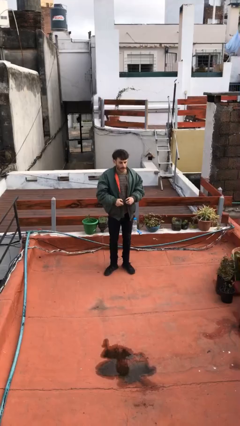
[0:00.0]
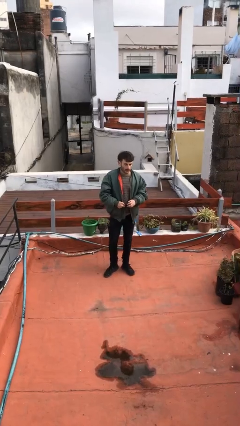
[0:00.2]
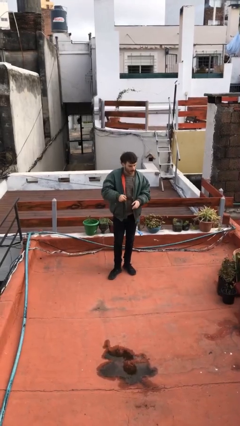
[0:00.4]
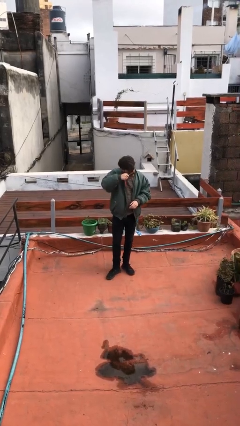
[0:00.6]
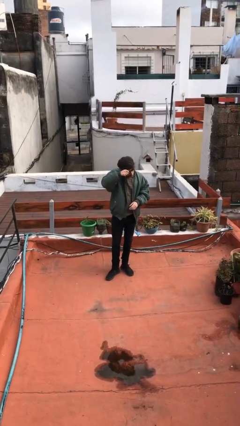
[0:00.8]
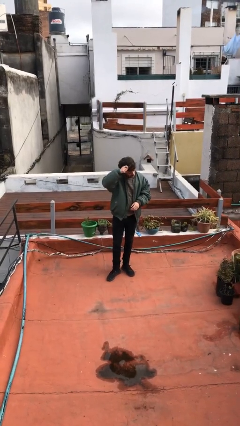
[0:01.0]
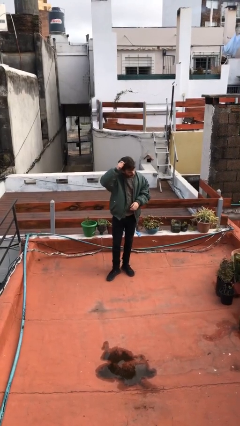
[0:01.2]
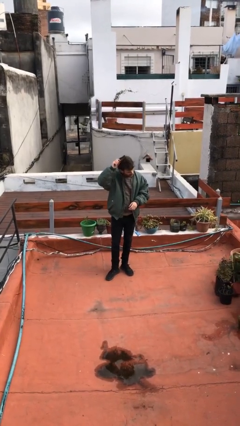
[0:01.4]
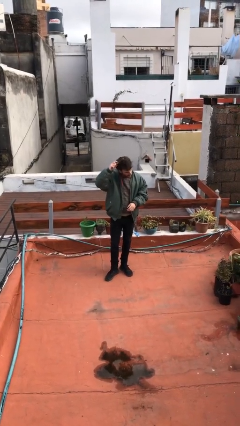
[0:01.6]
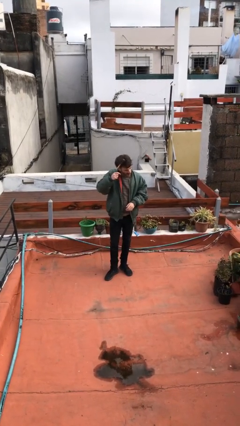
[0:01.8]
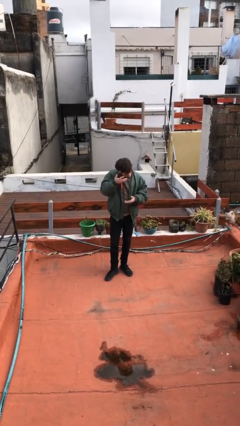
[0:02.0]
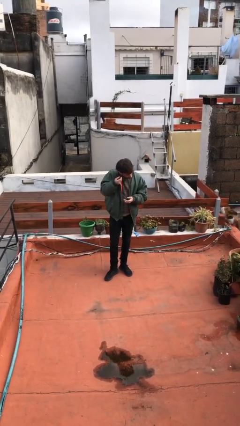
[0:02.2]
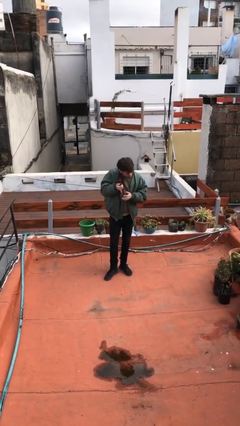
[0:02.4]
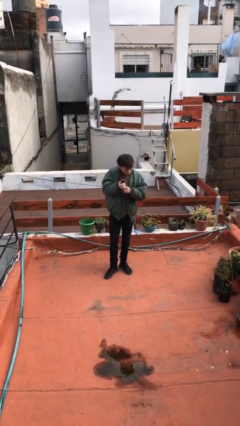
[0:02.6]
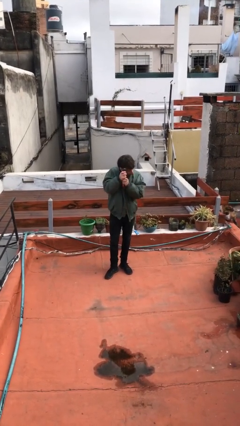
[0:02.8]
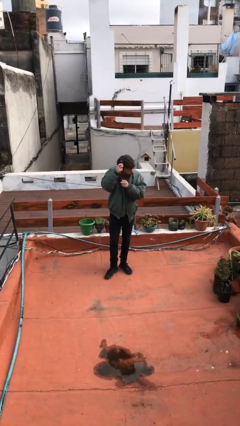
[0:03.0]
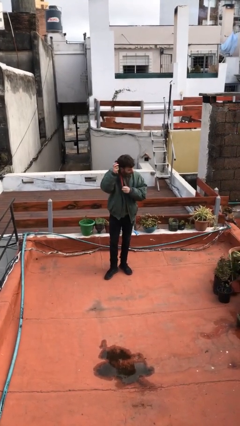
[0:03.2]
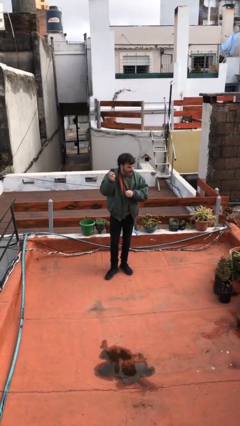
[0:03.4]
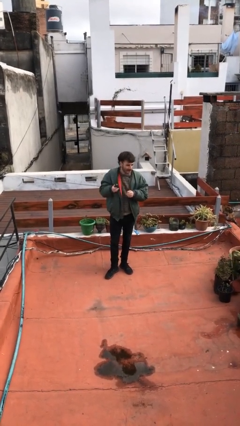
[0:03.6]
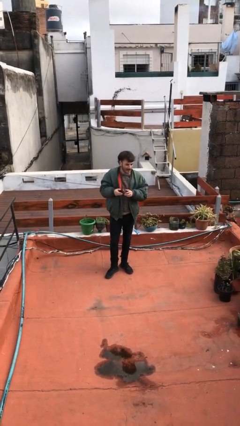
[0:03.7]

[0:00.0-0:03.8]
person brushes hair

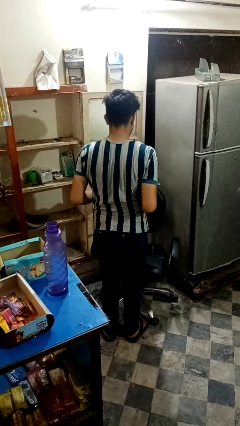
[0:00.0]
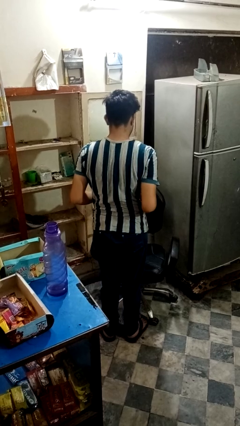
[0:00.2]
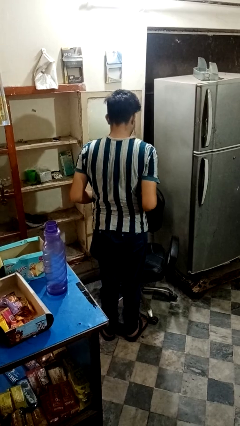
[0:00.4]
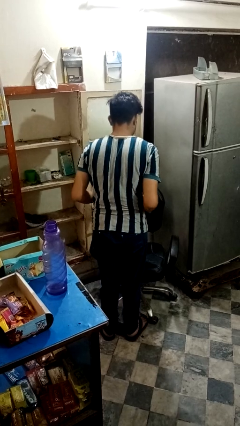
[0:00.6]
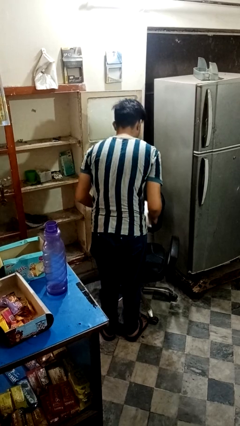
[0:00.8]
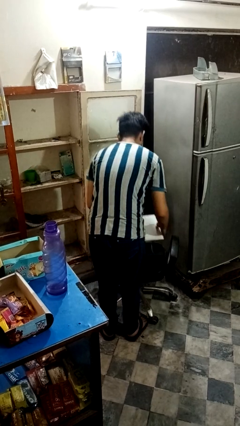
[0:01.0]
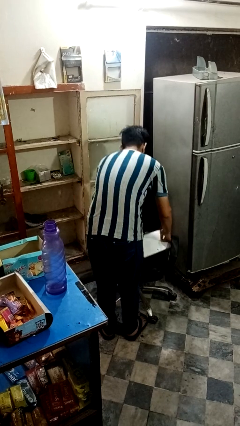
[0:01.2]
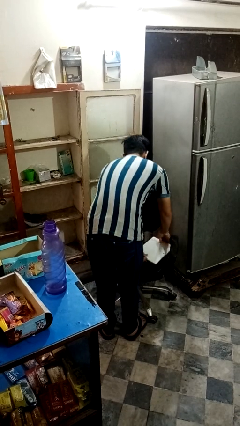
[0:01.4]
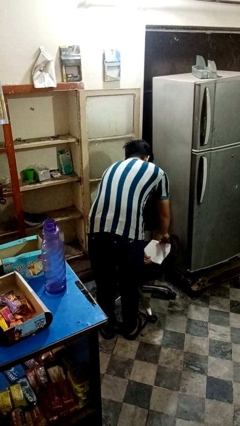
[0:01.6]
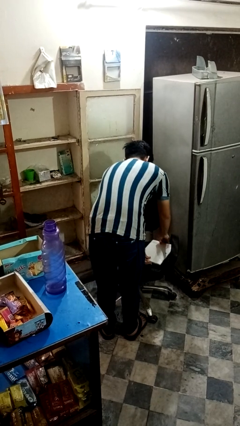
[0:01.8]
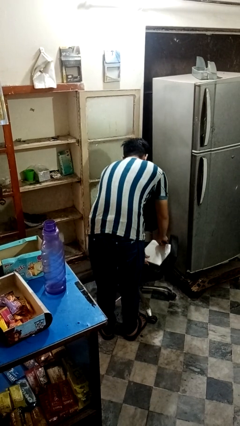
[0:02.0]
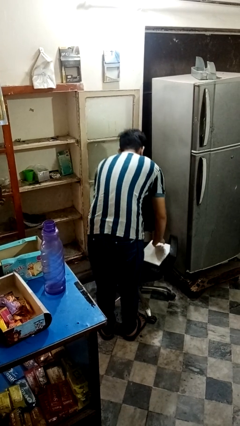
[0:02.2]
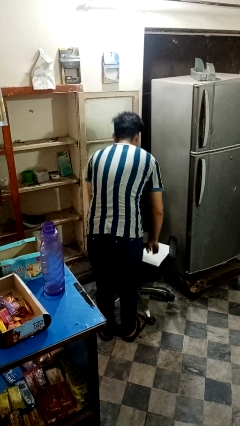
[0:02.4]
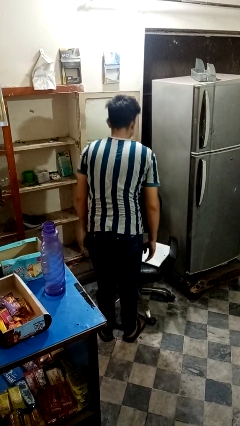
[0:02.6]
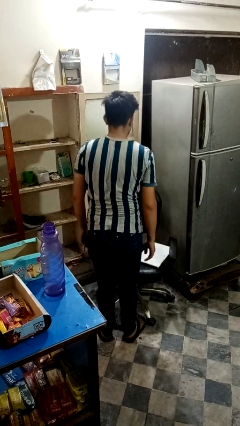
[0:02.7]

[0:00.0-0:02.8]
person puts down object on couch

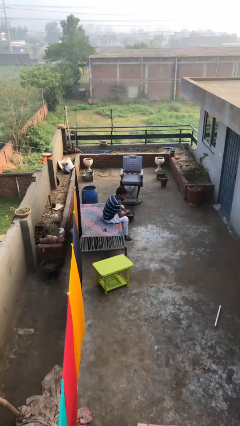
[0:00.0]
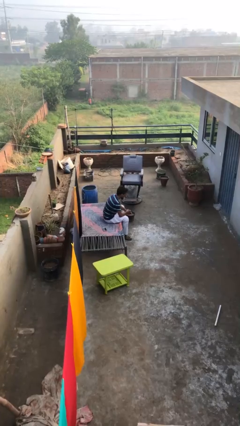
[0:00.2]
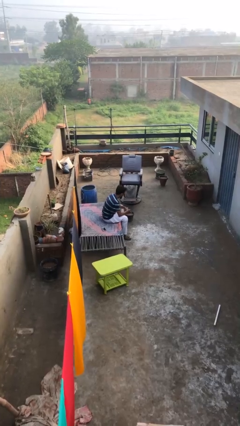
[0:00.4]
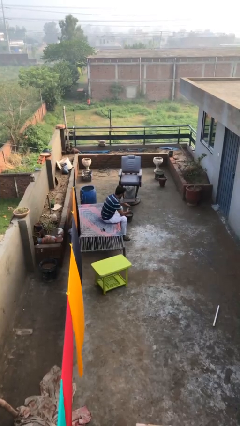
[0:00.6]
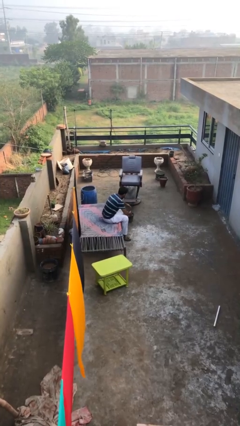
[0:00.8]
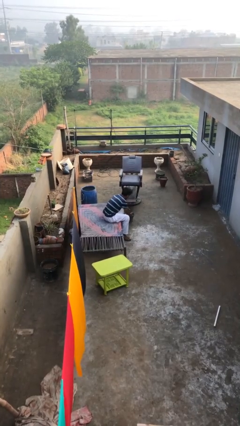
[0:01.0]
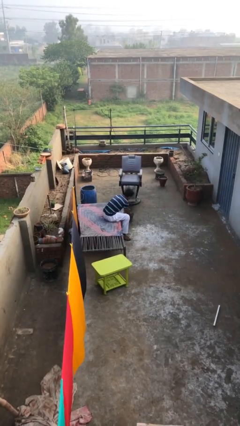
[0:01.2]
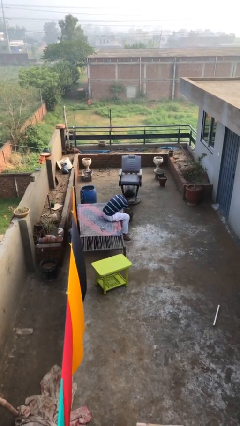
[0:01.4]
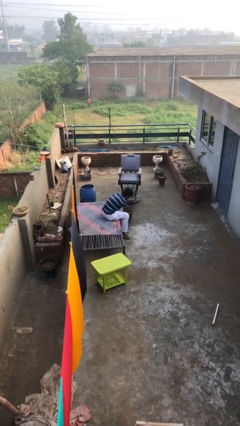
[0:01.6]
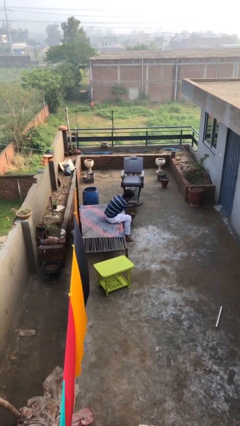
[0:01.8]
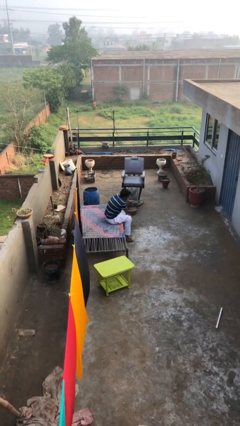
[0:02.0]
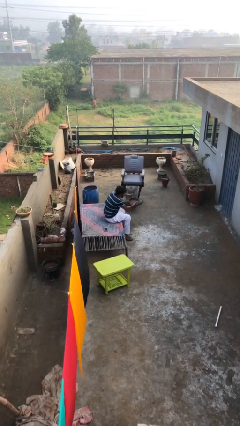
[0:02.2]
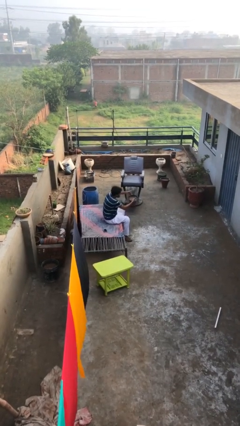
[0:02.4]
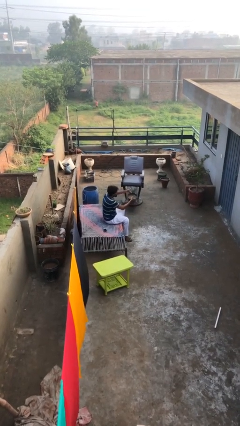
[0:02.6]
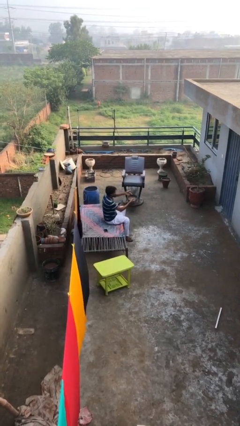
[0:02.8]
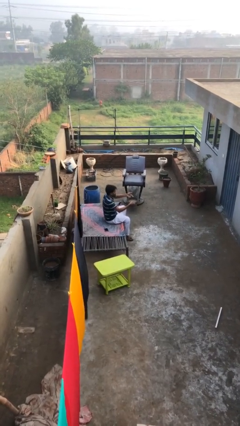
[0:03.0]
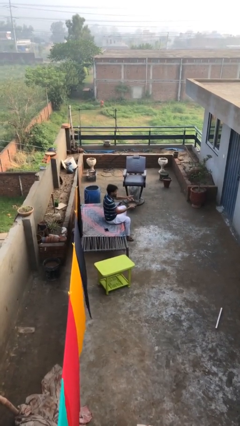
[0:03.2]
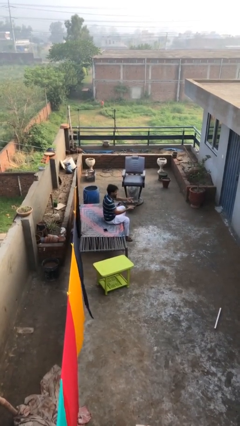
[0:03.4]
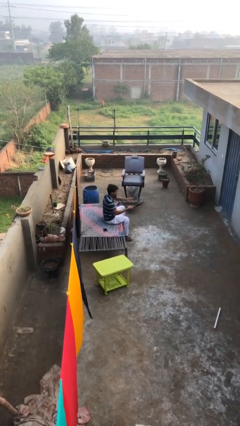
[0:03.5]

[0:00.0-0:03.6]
person picks up object from floor

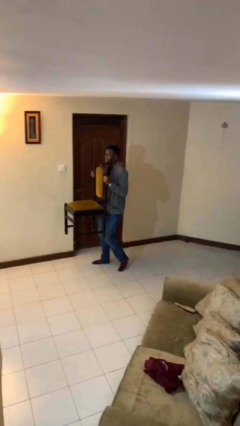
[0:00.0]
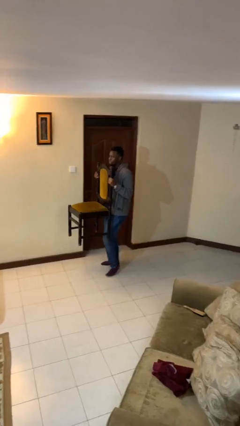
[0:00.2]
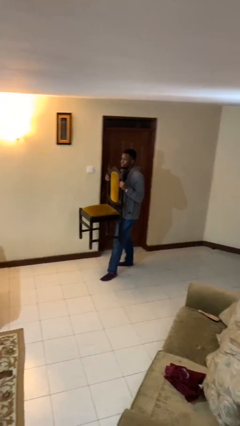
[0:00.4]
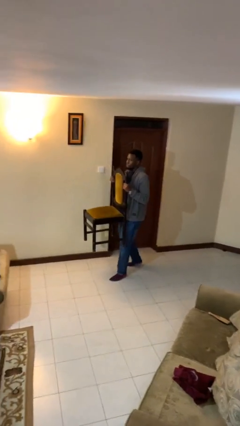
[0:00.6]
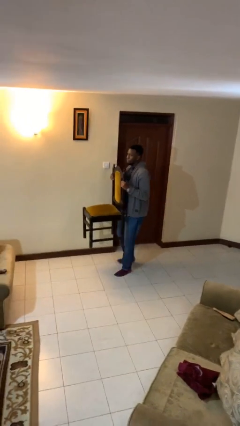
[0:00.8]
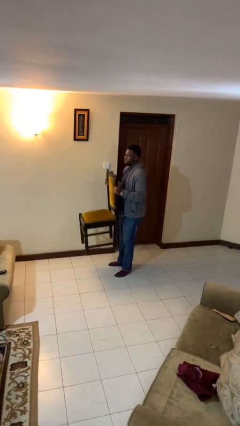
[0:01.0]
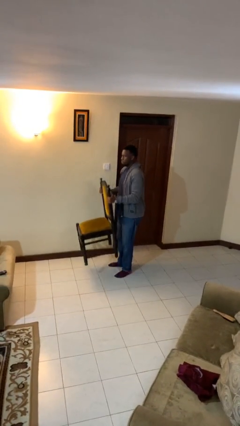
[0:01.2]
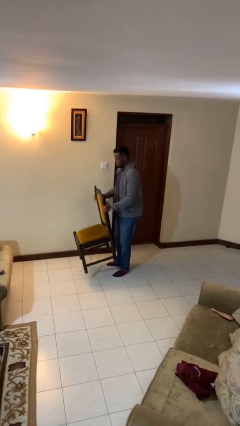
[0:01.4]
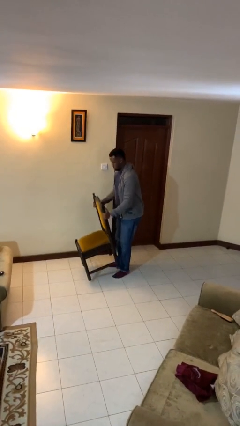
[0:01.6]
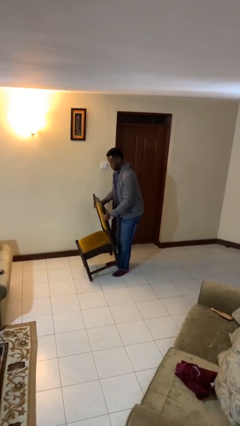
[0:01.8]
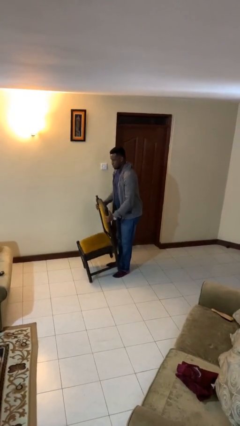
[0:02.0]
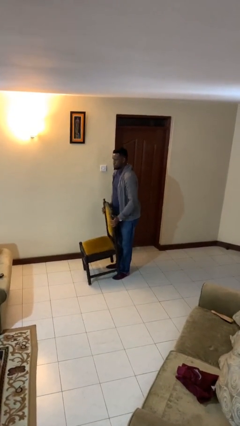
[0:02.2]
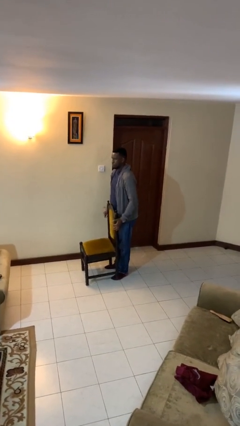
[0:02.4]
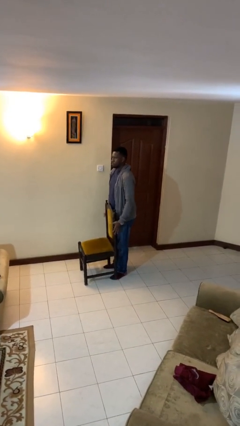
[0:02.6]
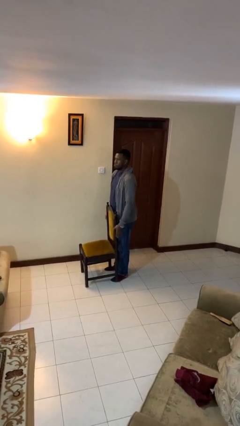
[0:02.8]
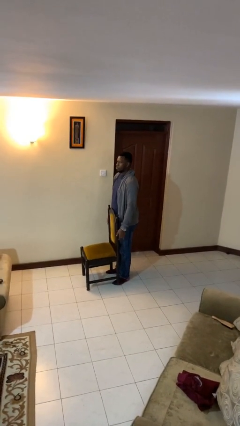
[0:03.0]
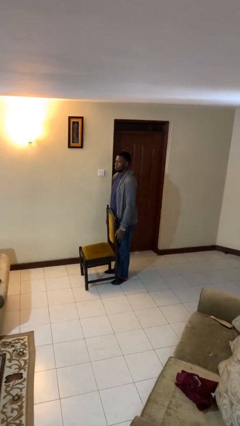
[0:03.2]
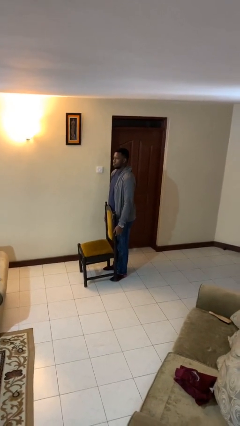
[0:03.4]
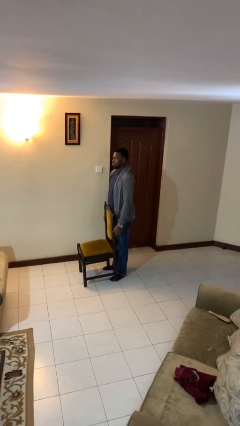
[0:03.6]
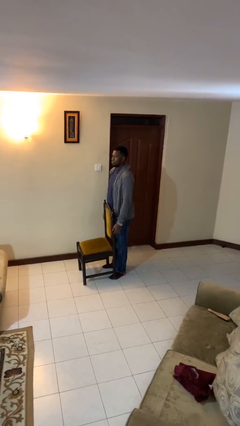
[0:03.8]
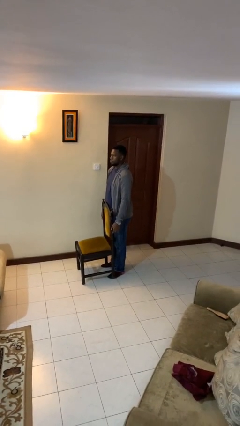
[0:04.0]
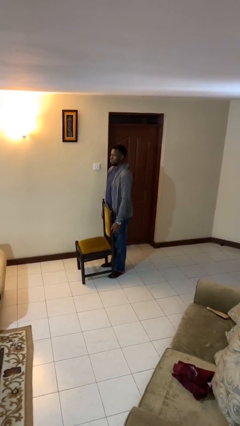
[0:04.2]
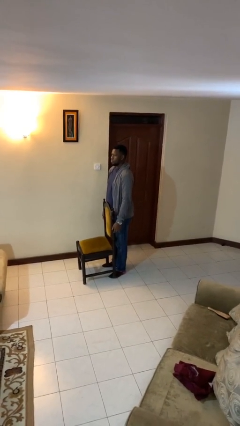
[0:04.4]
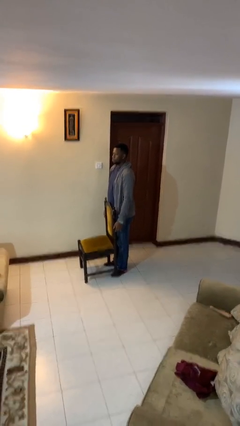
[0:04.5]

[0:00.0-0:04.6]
person puts down object on floor

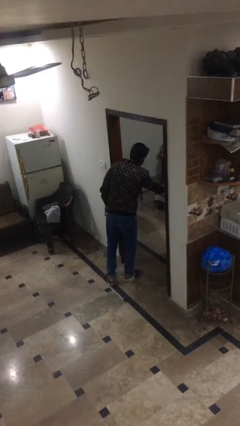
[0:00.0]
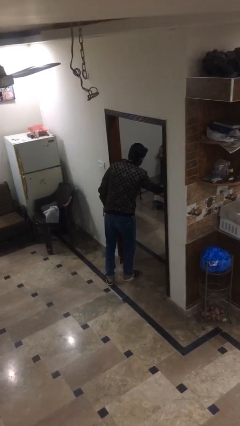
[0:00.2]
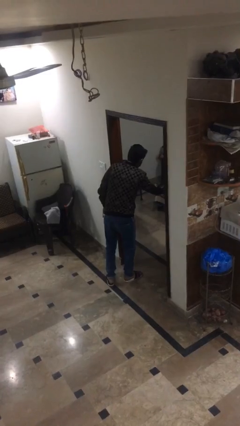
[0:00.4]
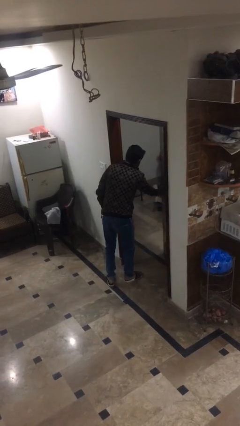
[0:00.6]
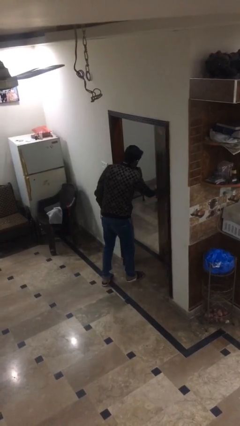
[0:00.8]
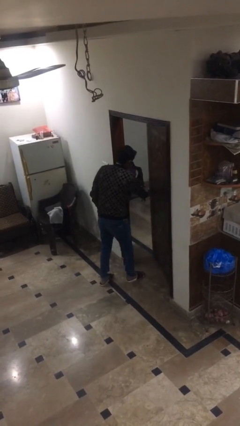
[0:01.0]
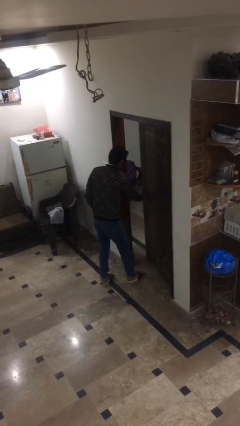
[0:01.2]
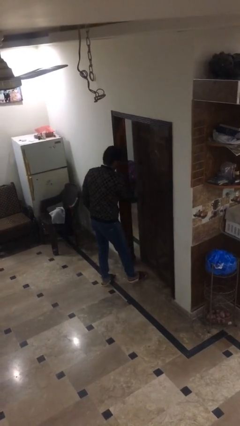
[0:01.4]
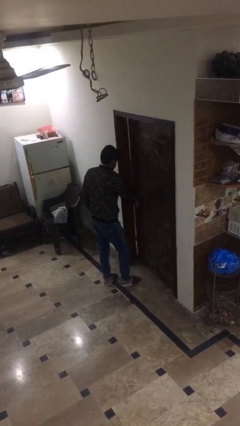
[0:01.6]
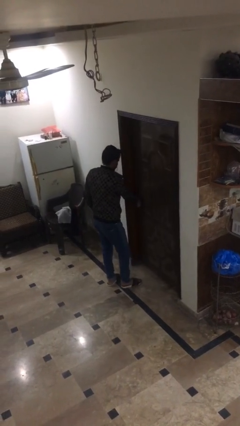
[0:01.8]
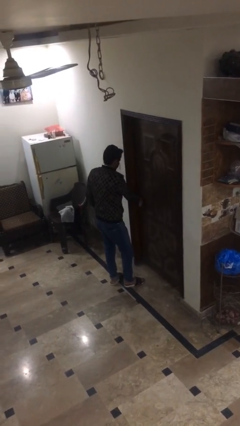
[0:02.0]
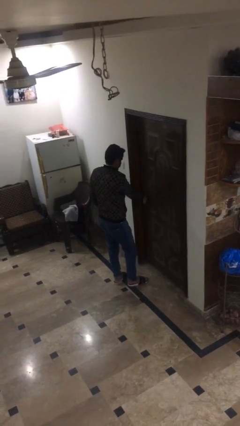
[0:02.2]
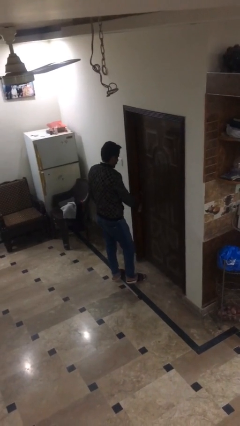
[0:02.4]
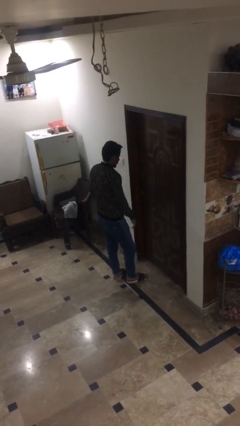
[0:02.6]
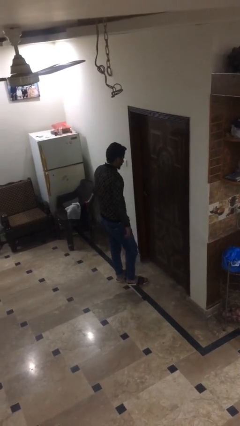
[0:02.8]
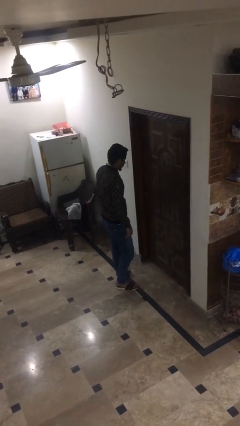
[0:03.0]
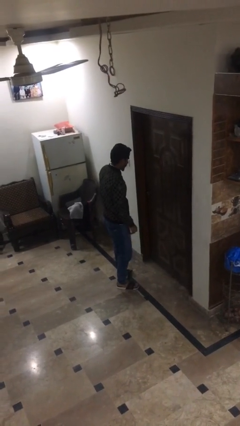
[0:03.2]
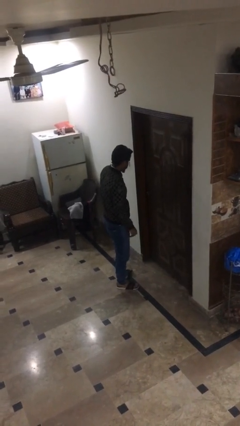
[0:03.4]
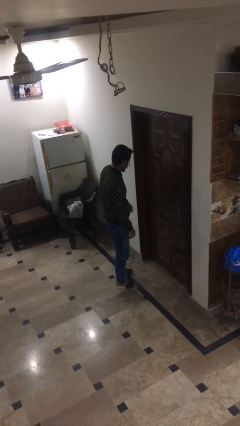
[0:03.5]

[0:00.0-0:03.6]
person closes facility door
